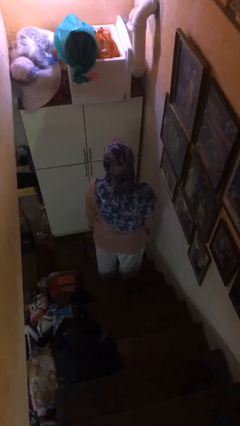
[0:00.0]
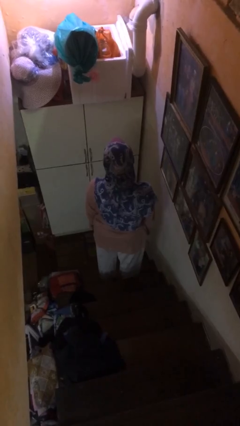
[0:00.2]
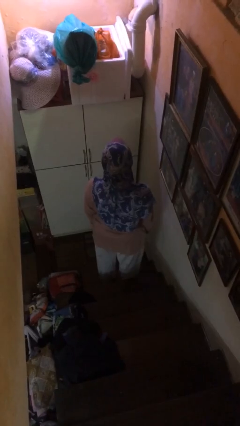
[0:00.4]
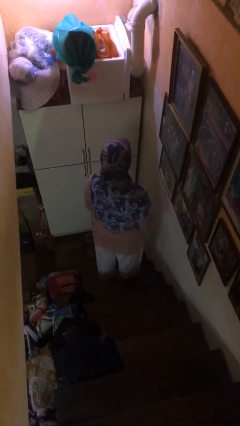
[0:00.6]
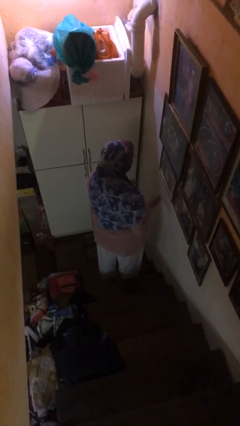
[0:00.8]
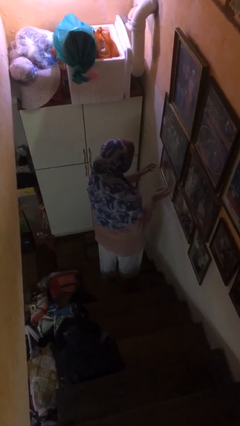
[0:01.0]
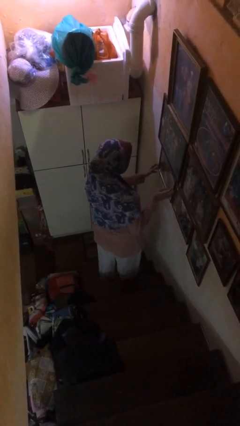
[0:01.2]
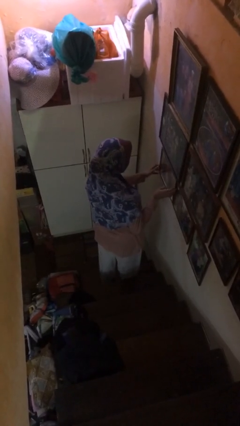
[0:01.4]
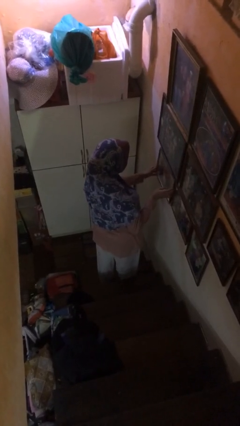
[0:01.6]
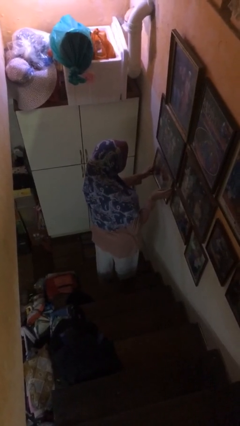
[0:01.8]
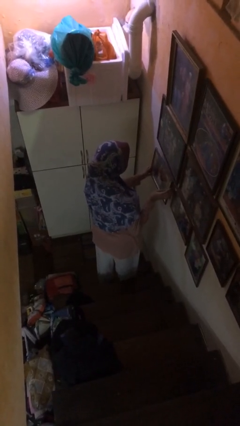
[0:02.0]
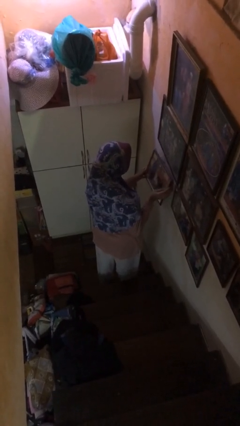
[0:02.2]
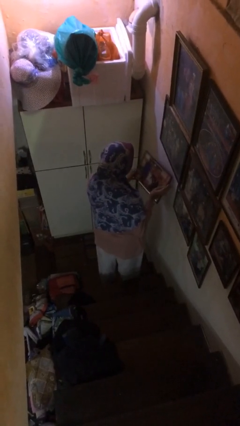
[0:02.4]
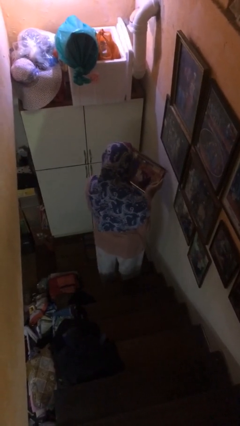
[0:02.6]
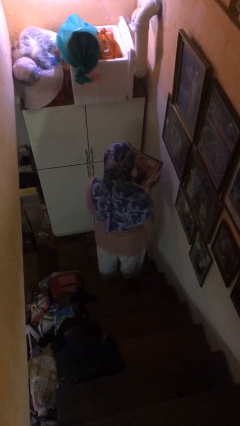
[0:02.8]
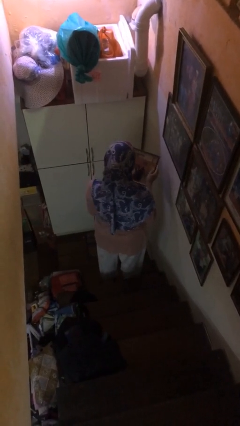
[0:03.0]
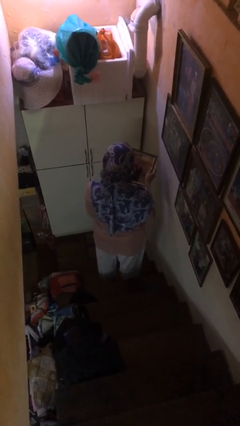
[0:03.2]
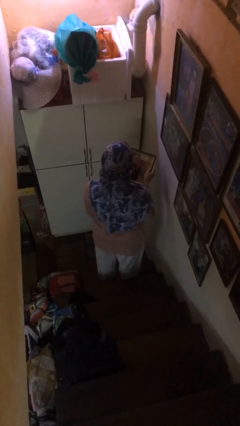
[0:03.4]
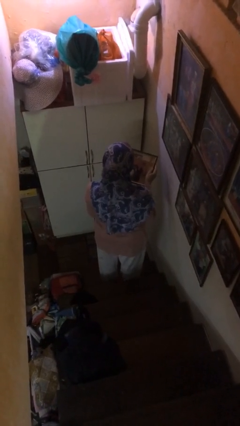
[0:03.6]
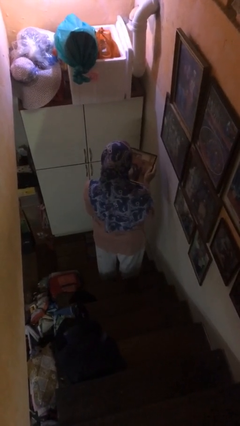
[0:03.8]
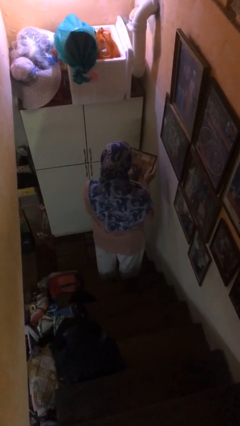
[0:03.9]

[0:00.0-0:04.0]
person puts up picture frame

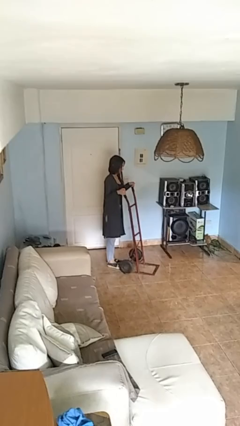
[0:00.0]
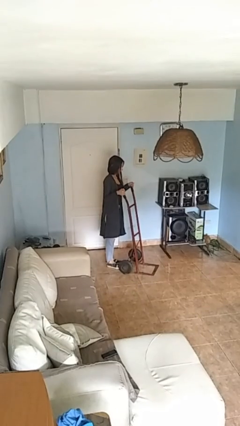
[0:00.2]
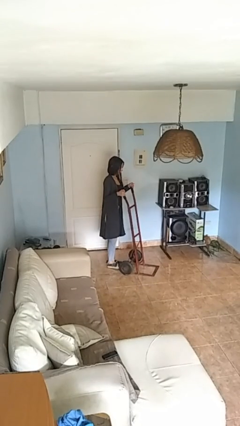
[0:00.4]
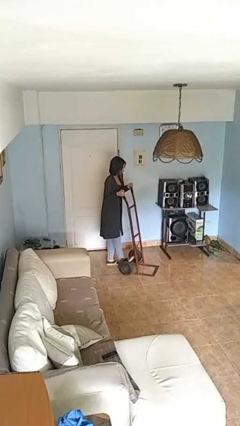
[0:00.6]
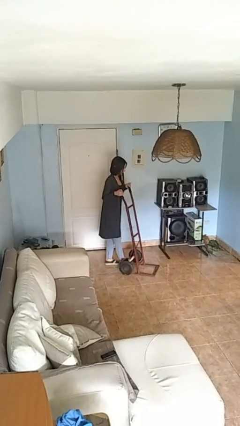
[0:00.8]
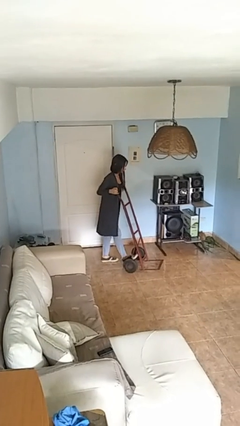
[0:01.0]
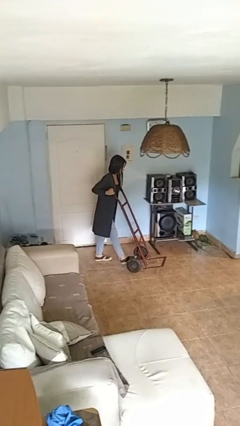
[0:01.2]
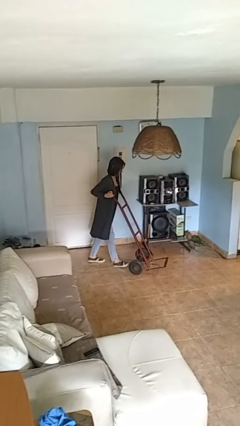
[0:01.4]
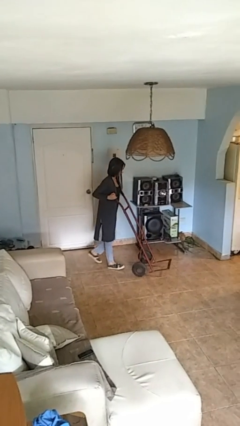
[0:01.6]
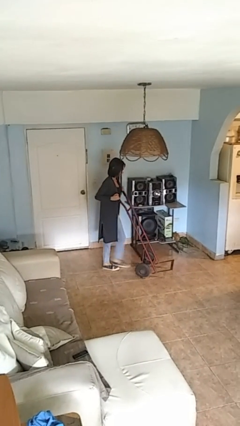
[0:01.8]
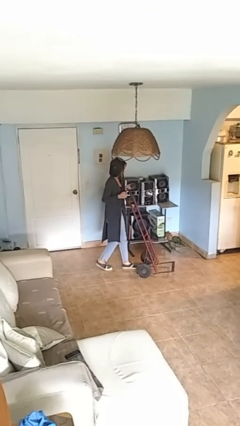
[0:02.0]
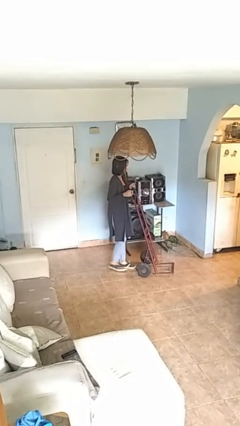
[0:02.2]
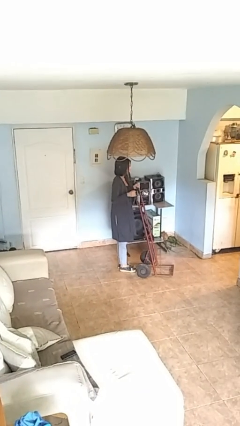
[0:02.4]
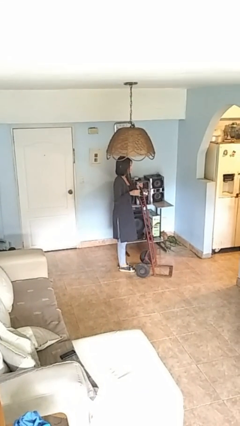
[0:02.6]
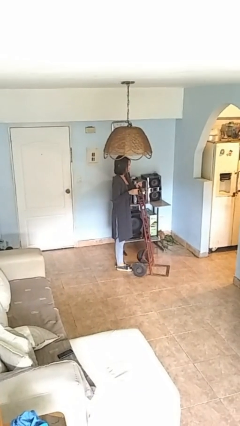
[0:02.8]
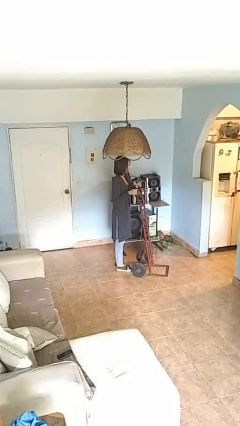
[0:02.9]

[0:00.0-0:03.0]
person pushes wheeled cart

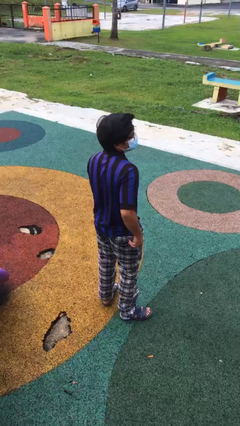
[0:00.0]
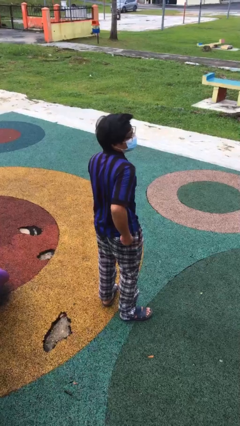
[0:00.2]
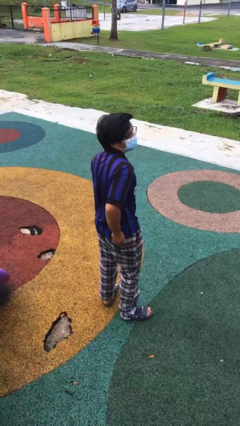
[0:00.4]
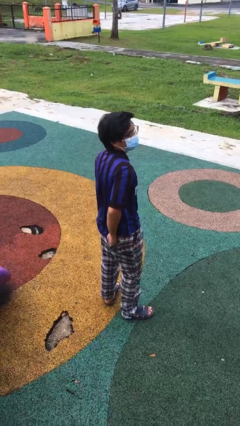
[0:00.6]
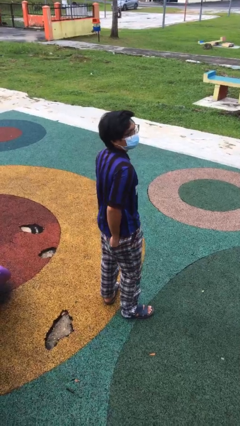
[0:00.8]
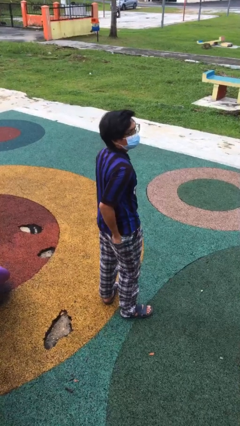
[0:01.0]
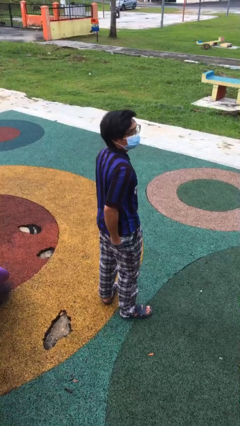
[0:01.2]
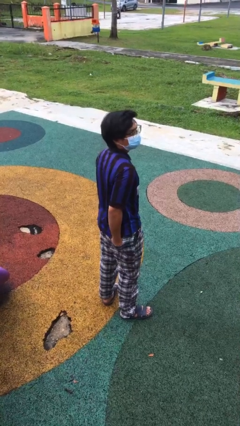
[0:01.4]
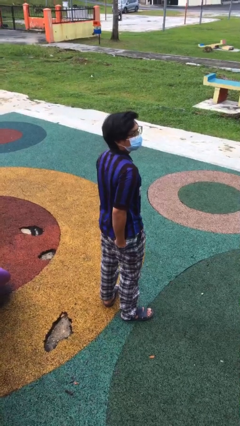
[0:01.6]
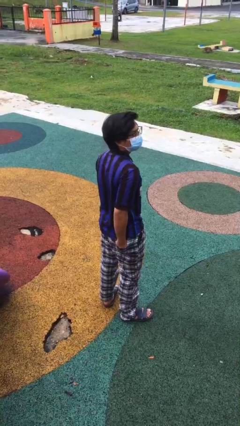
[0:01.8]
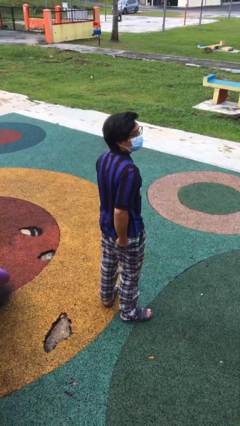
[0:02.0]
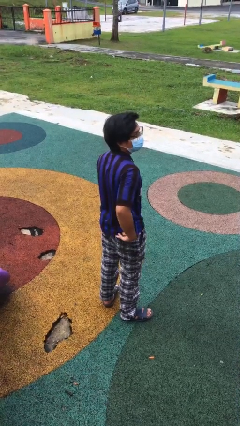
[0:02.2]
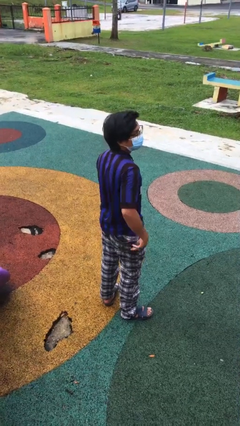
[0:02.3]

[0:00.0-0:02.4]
person puts hands in back pockets

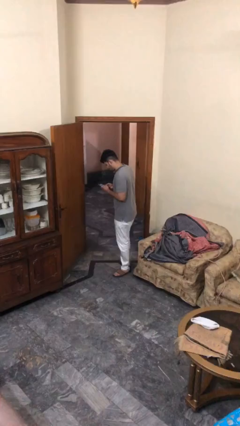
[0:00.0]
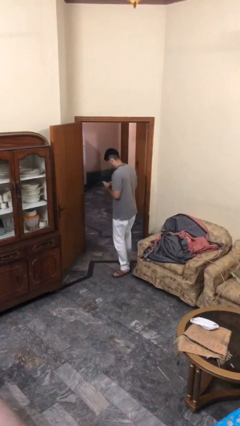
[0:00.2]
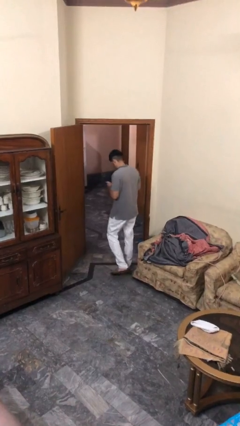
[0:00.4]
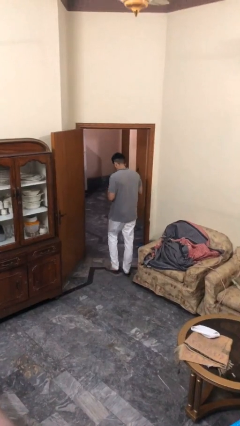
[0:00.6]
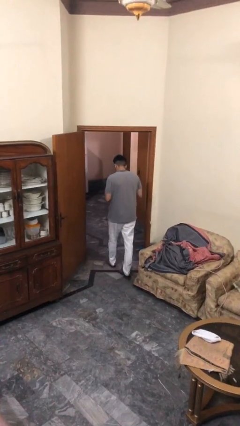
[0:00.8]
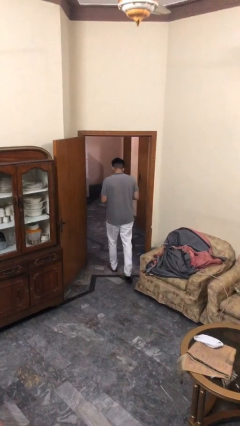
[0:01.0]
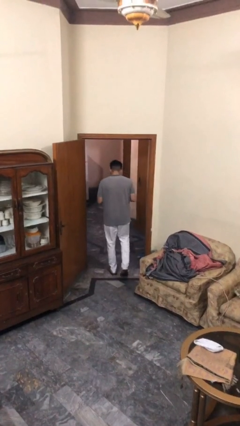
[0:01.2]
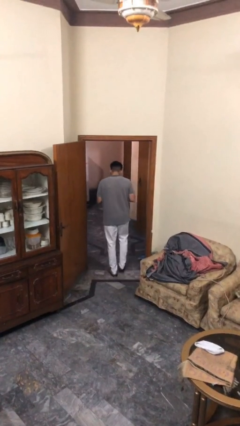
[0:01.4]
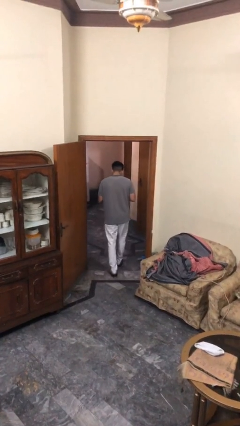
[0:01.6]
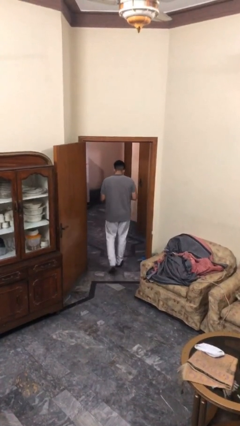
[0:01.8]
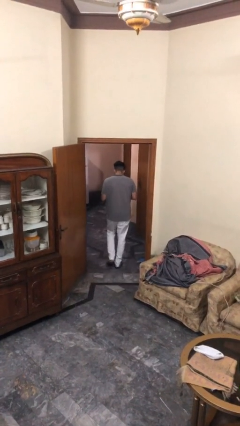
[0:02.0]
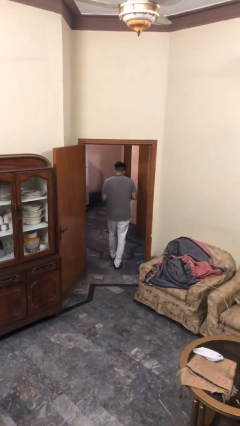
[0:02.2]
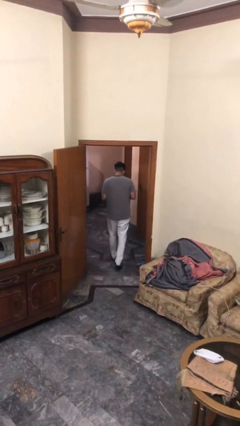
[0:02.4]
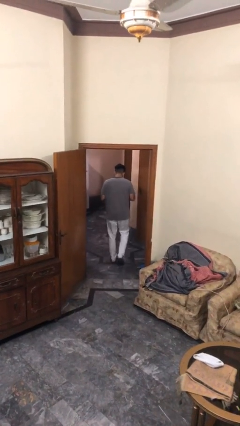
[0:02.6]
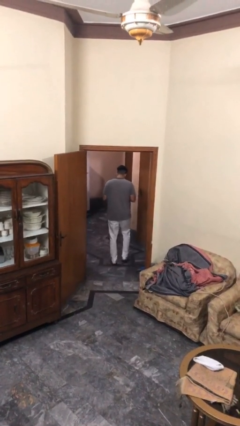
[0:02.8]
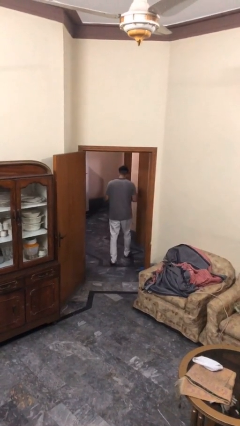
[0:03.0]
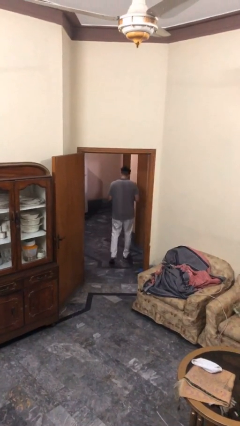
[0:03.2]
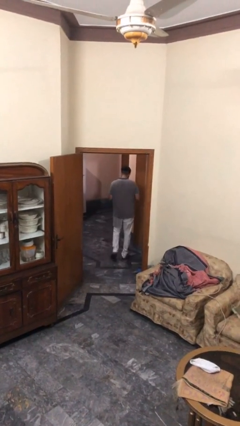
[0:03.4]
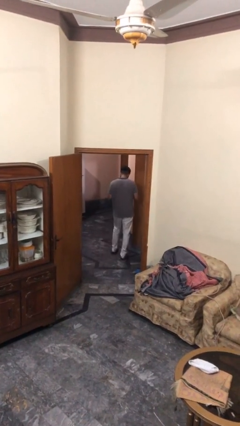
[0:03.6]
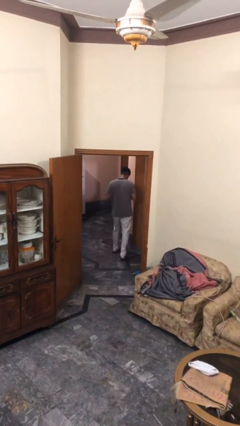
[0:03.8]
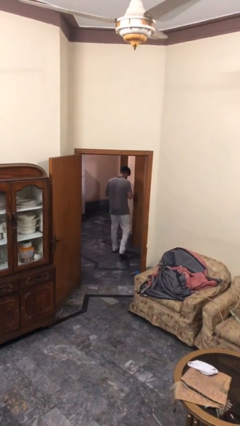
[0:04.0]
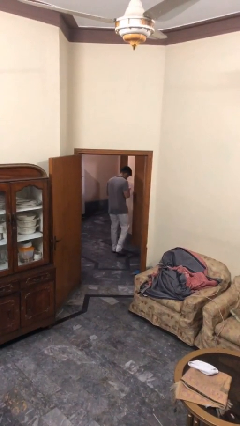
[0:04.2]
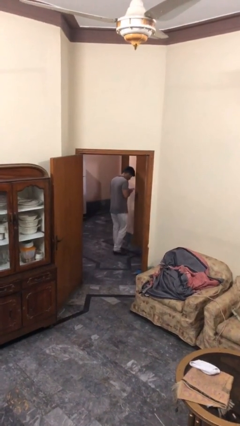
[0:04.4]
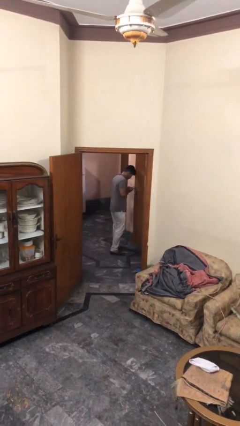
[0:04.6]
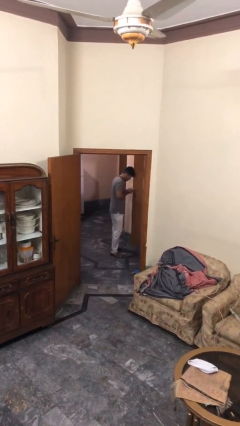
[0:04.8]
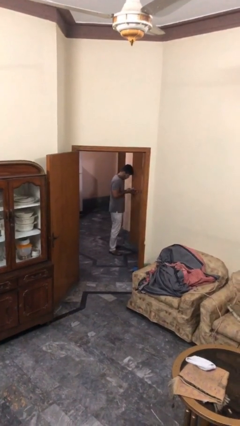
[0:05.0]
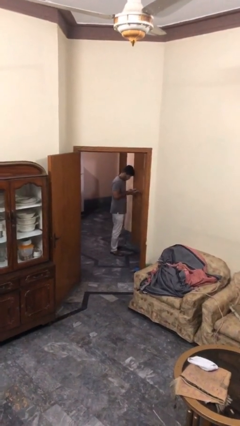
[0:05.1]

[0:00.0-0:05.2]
person exits scene through structure

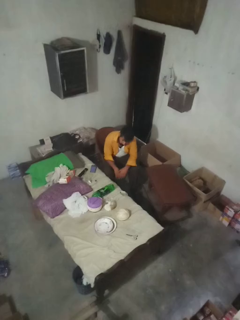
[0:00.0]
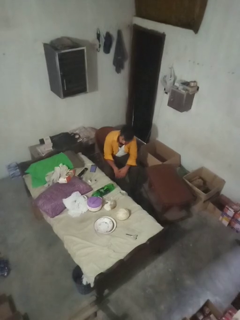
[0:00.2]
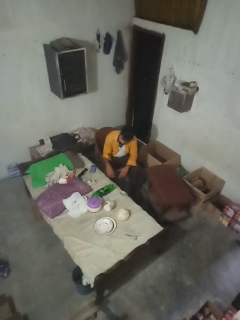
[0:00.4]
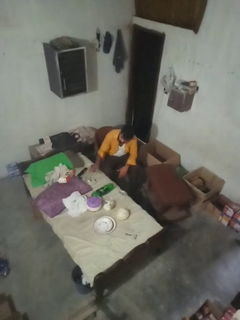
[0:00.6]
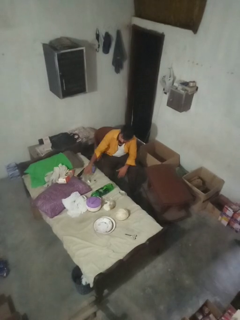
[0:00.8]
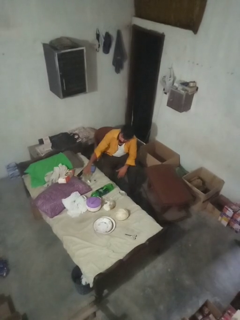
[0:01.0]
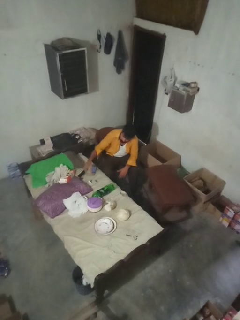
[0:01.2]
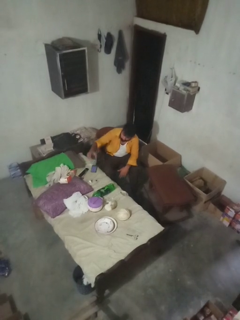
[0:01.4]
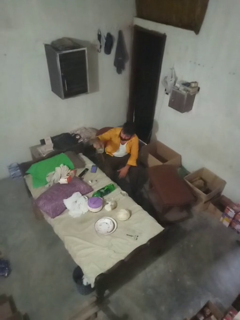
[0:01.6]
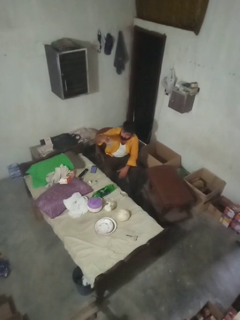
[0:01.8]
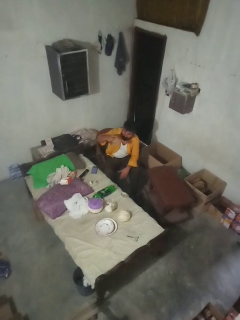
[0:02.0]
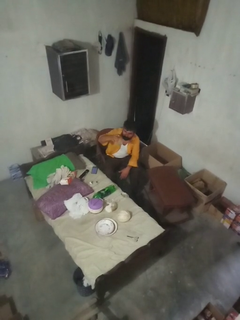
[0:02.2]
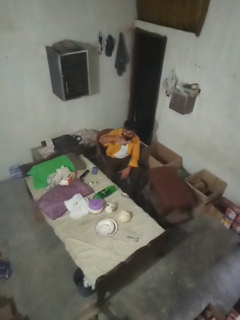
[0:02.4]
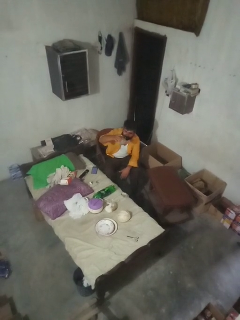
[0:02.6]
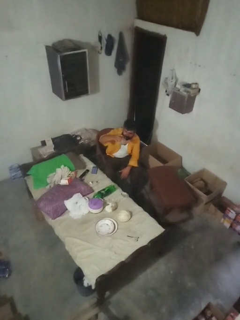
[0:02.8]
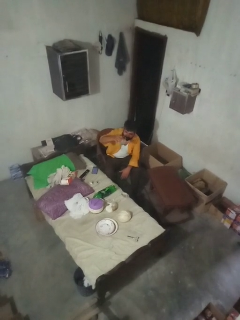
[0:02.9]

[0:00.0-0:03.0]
person picks up object from bed
